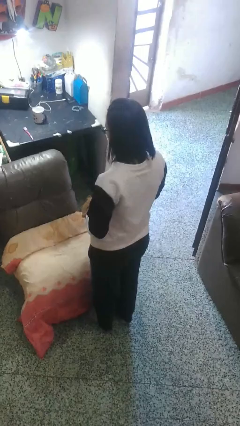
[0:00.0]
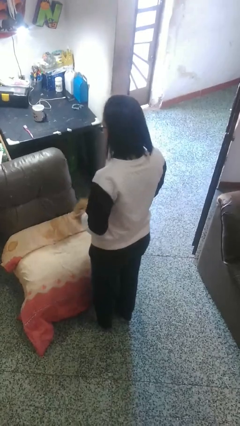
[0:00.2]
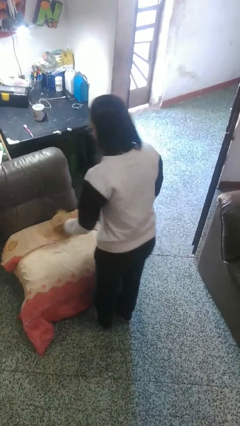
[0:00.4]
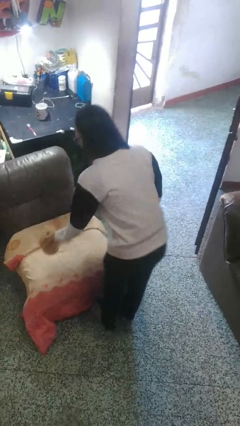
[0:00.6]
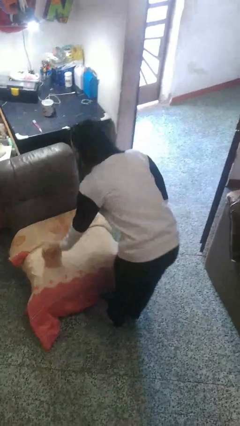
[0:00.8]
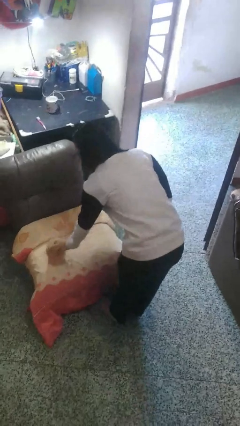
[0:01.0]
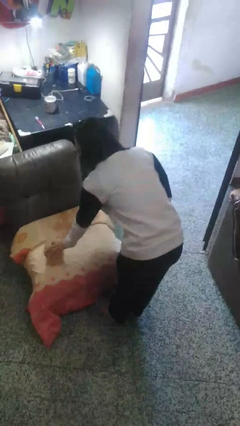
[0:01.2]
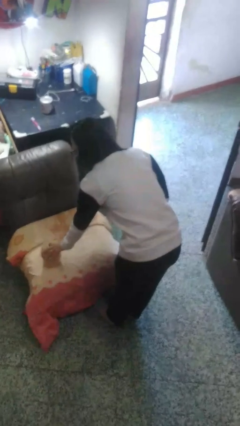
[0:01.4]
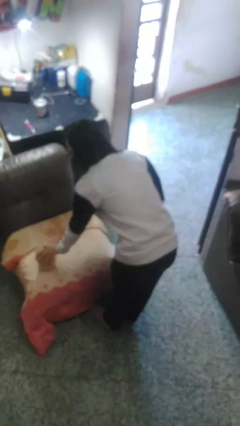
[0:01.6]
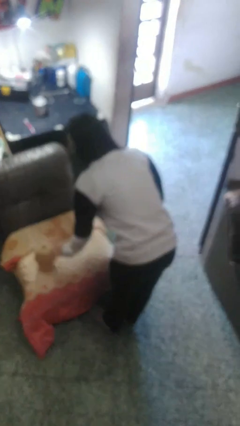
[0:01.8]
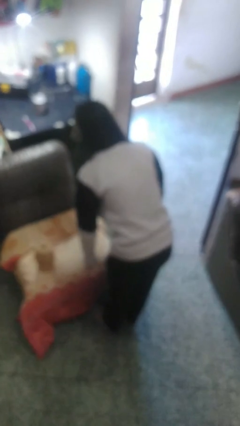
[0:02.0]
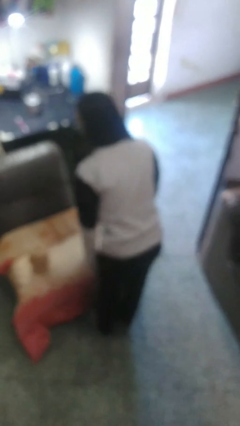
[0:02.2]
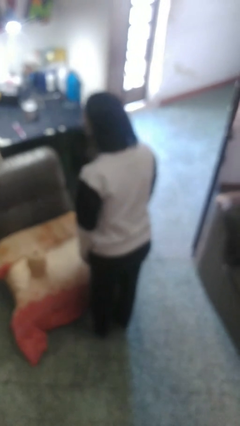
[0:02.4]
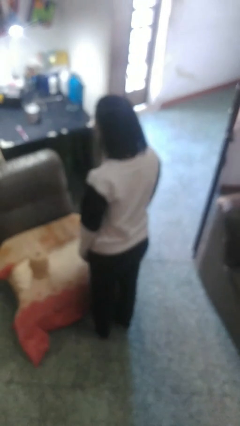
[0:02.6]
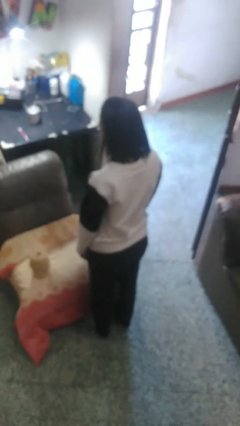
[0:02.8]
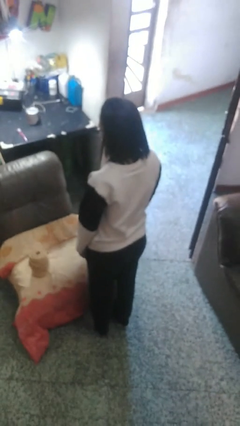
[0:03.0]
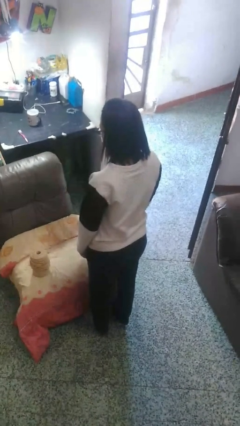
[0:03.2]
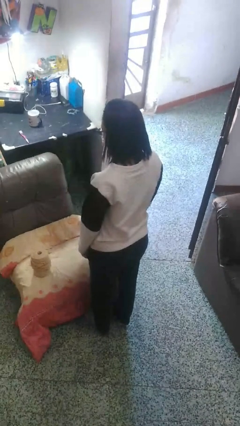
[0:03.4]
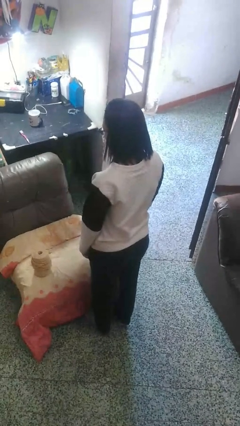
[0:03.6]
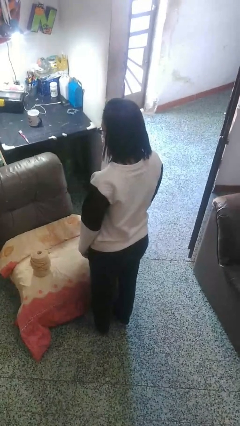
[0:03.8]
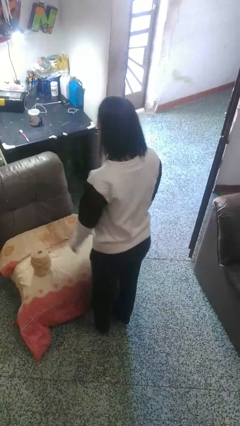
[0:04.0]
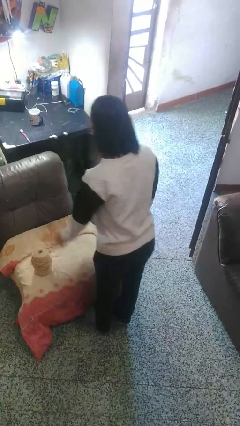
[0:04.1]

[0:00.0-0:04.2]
person puts down object on couch

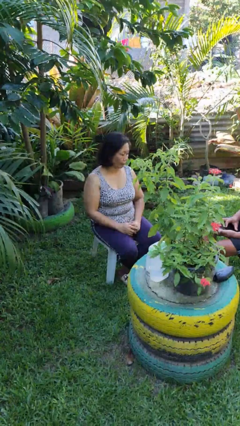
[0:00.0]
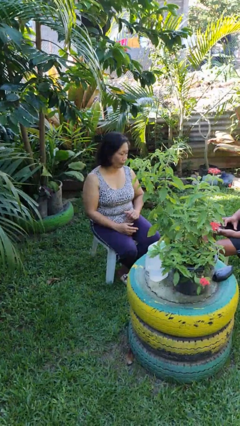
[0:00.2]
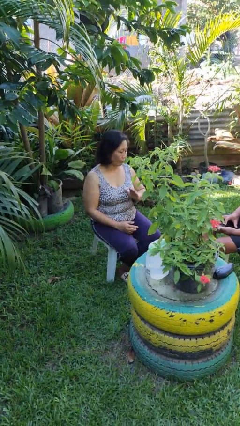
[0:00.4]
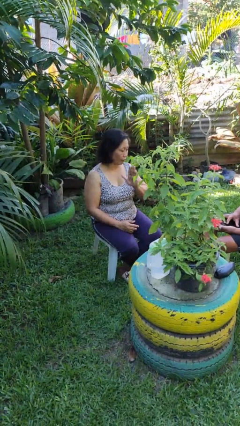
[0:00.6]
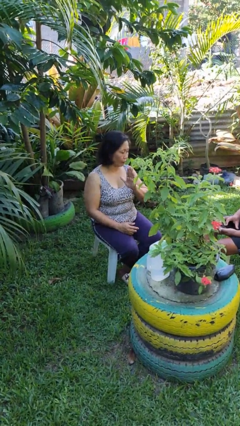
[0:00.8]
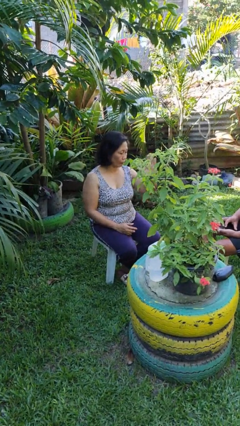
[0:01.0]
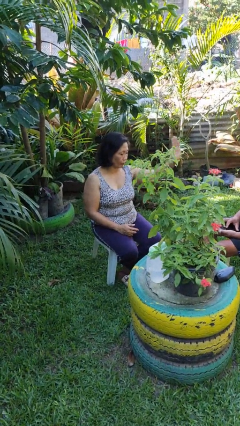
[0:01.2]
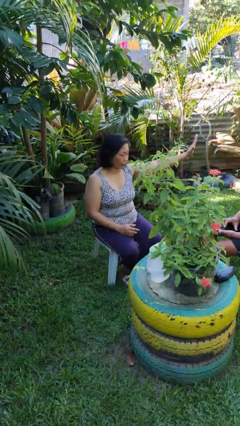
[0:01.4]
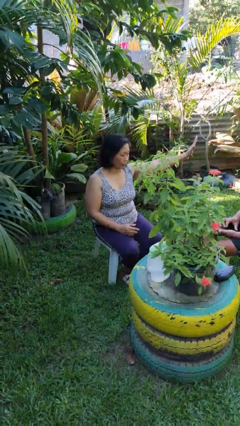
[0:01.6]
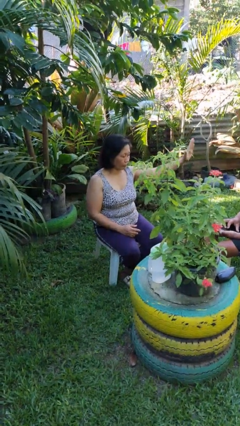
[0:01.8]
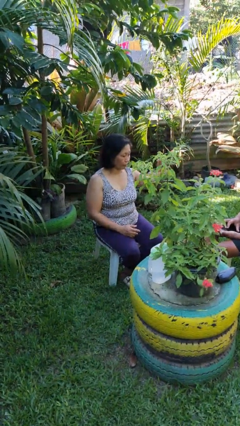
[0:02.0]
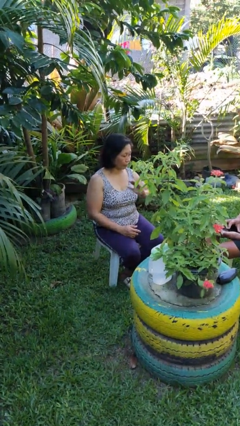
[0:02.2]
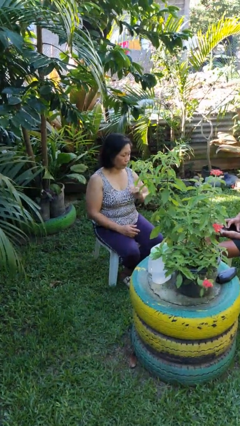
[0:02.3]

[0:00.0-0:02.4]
person gestures swipe left

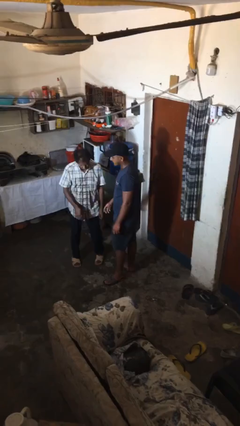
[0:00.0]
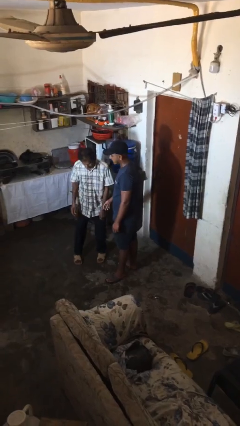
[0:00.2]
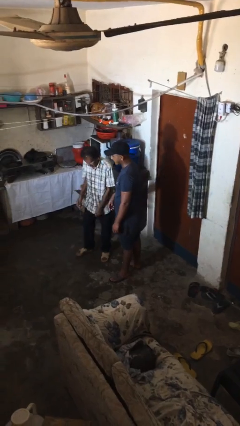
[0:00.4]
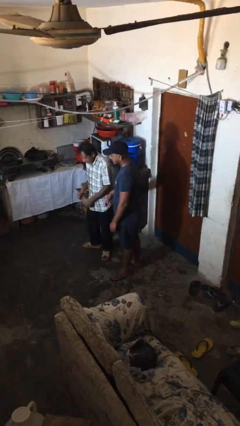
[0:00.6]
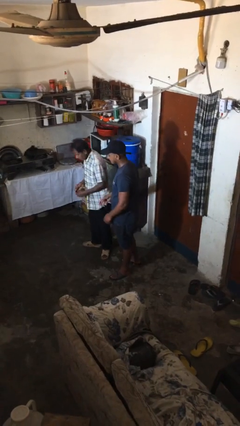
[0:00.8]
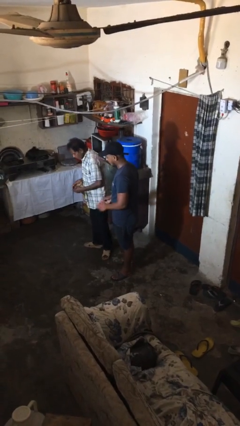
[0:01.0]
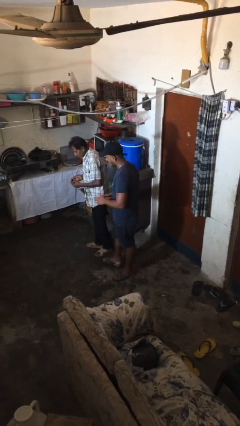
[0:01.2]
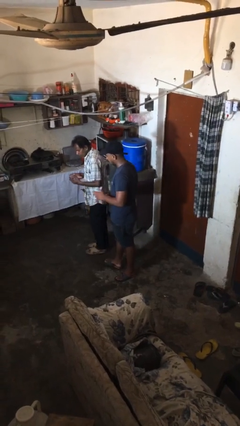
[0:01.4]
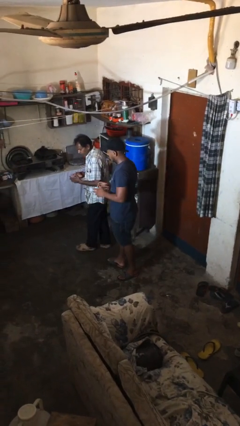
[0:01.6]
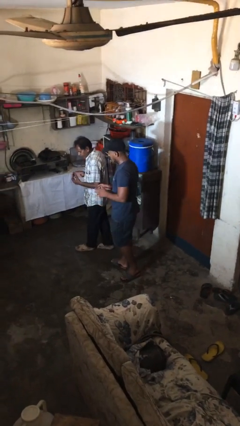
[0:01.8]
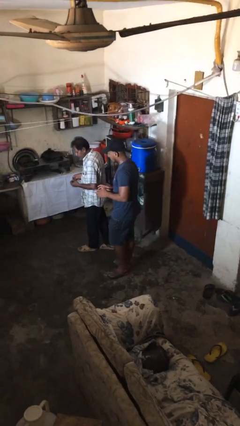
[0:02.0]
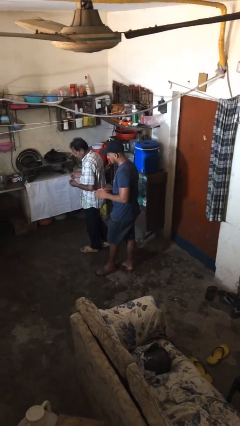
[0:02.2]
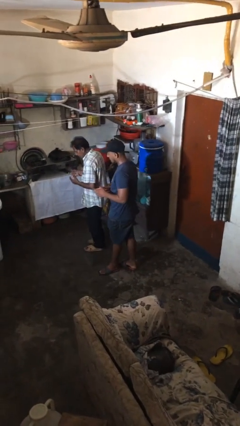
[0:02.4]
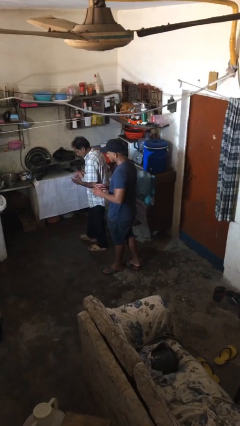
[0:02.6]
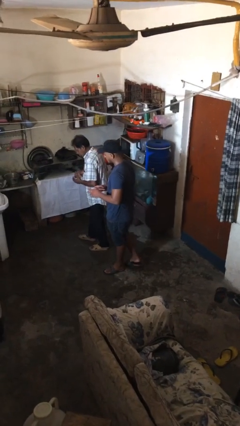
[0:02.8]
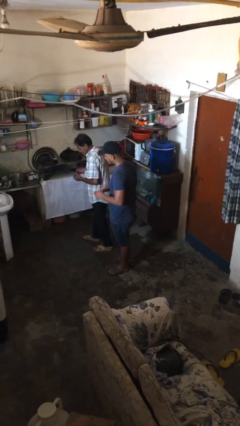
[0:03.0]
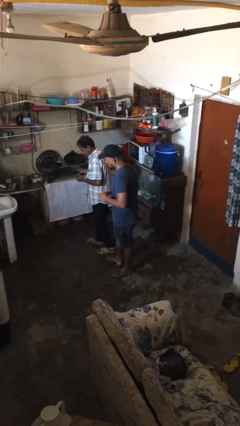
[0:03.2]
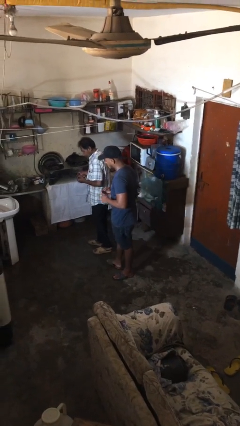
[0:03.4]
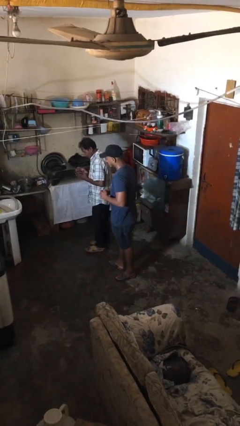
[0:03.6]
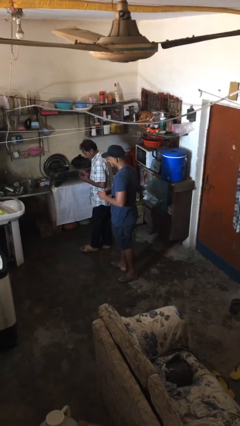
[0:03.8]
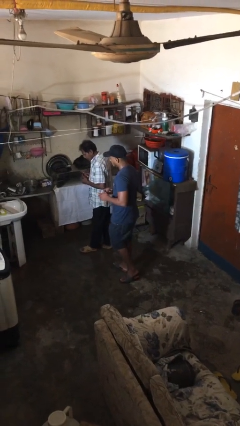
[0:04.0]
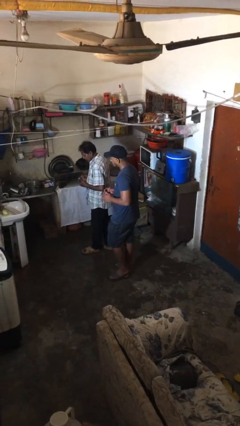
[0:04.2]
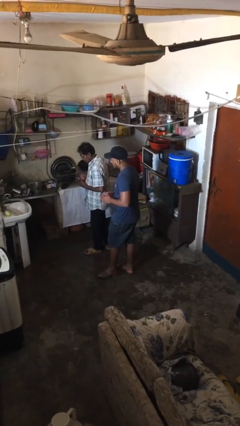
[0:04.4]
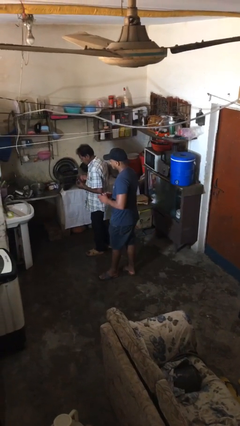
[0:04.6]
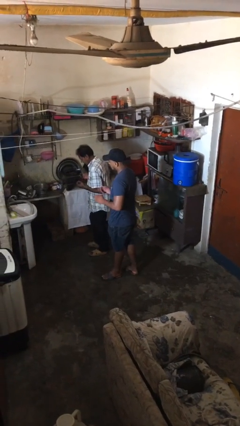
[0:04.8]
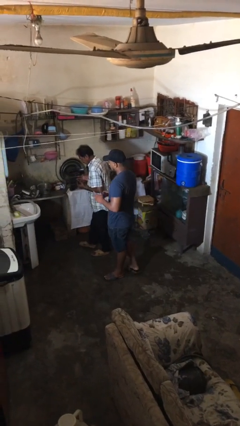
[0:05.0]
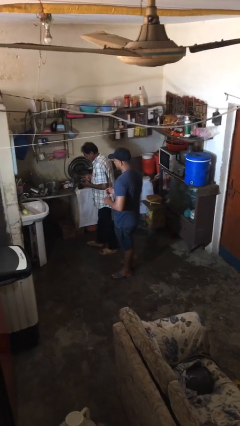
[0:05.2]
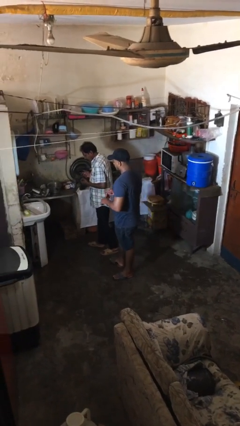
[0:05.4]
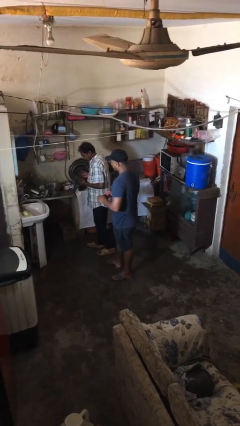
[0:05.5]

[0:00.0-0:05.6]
person talks to person

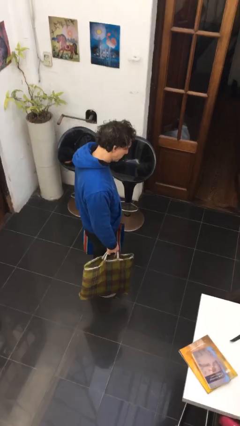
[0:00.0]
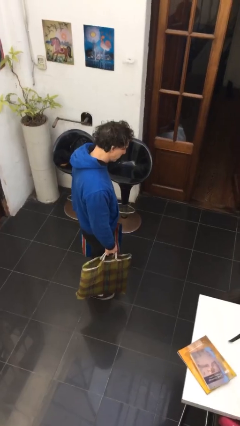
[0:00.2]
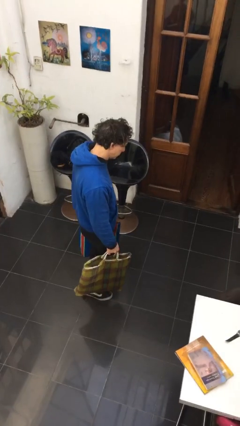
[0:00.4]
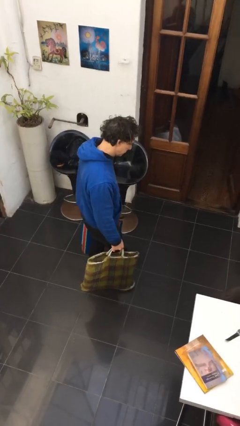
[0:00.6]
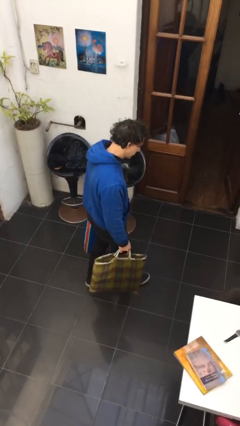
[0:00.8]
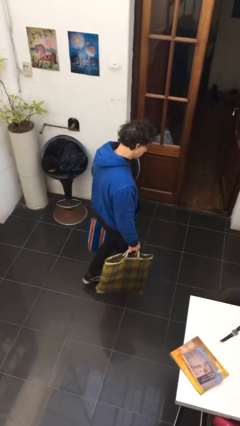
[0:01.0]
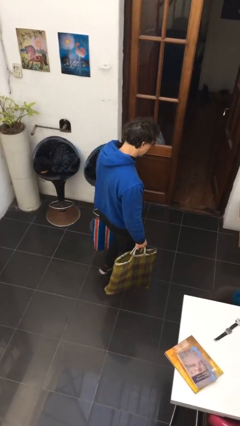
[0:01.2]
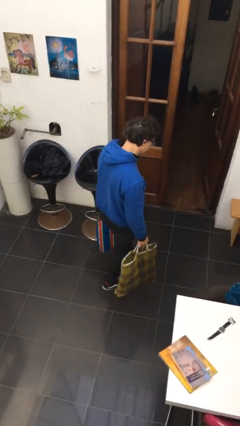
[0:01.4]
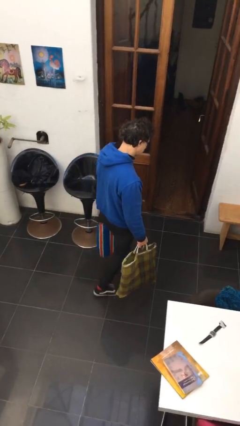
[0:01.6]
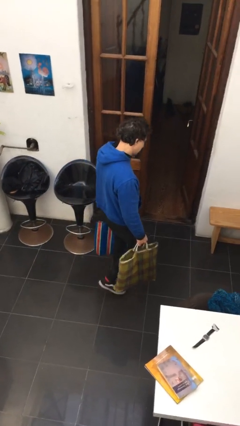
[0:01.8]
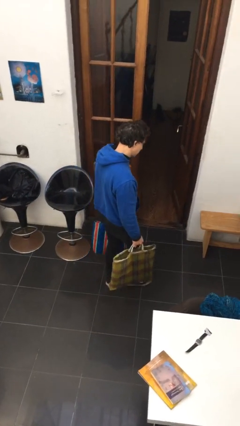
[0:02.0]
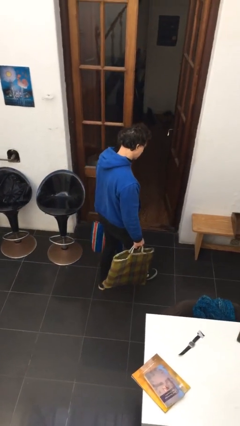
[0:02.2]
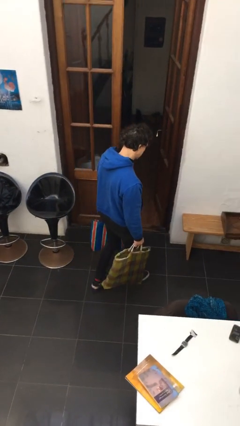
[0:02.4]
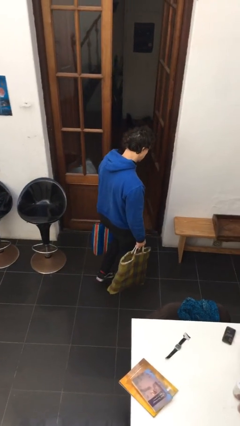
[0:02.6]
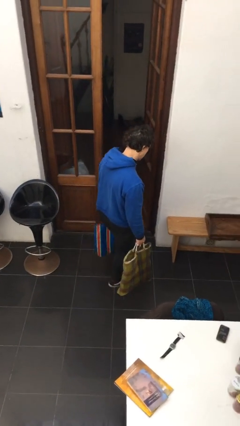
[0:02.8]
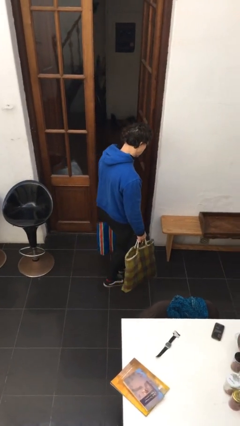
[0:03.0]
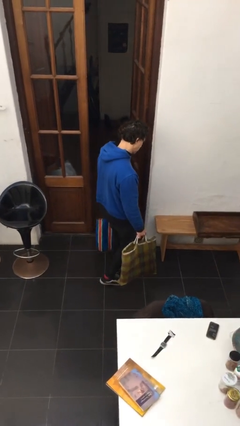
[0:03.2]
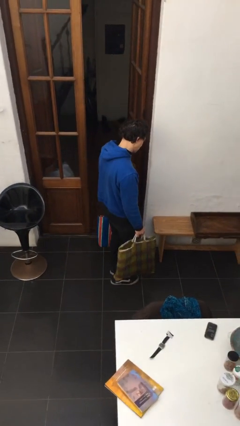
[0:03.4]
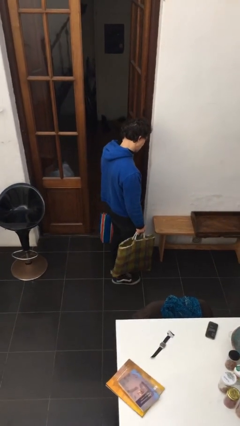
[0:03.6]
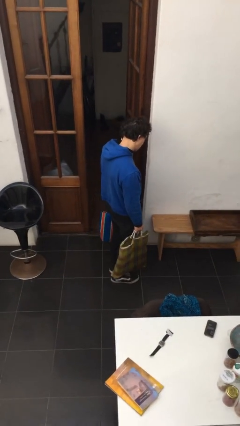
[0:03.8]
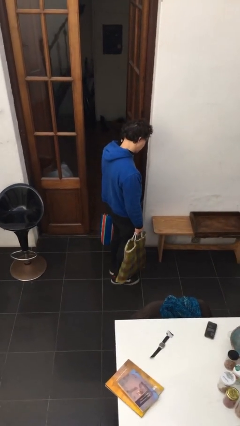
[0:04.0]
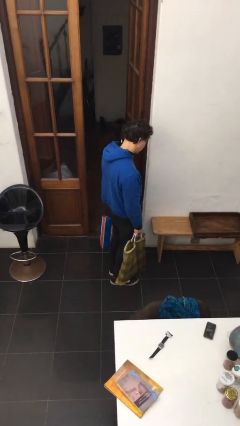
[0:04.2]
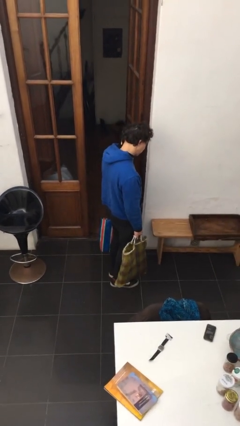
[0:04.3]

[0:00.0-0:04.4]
person carries groceries

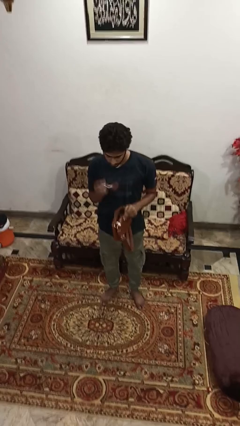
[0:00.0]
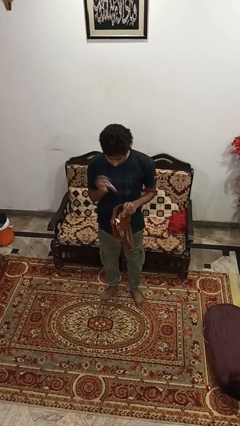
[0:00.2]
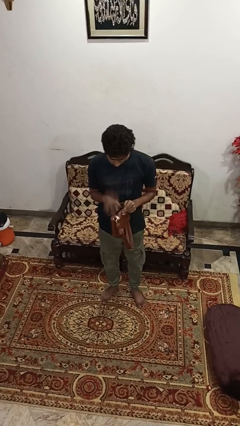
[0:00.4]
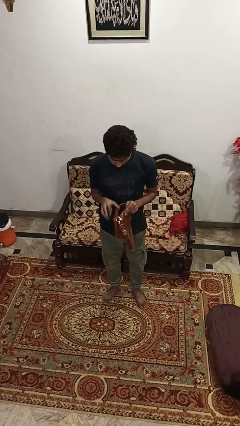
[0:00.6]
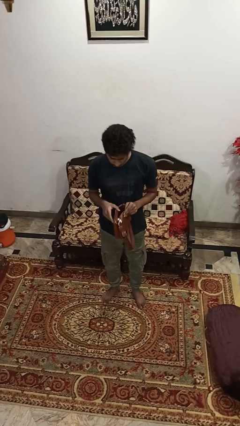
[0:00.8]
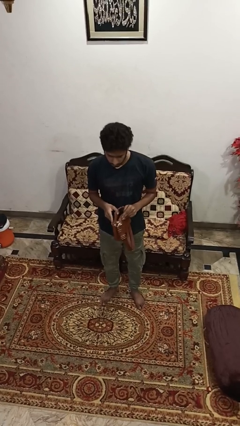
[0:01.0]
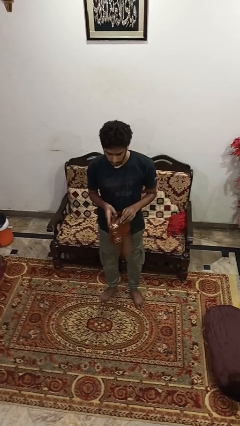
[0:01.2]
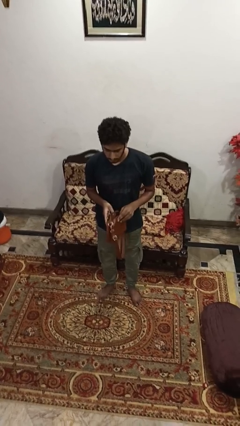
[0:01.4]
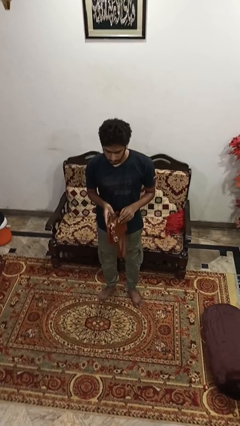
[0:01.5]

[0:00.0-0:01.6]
person puts object into purse
